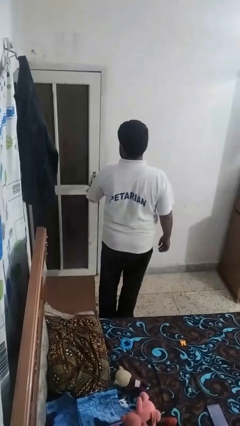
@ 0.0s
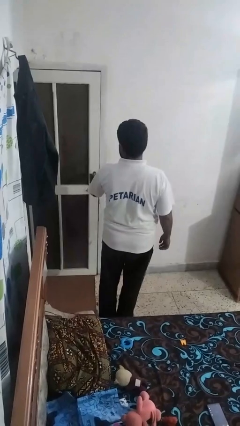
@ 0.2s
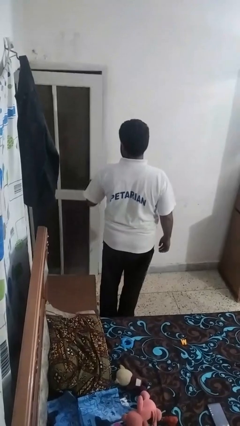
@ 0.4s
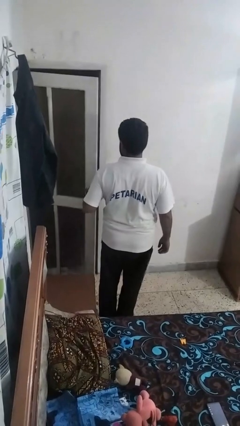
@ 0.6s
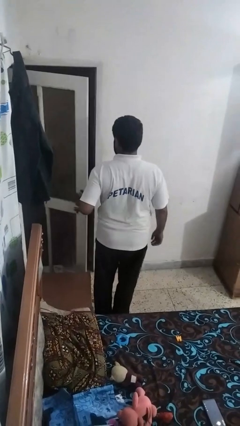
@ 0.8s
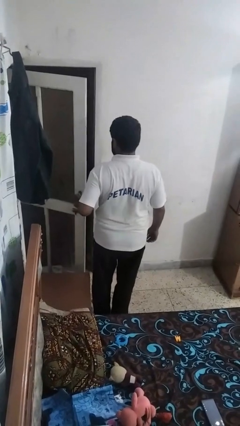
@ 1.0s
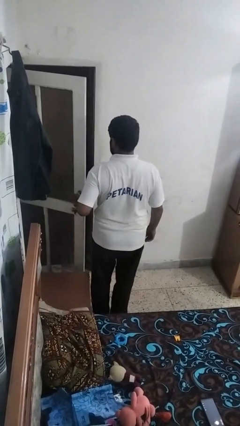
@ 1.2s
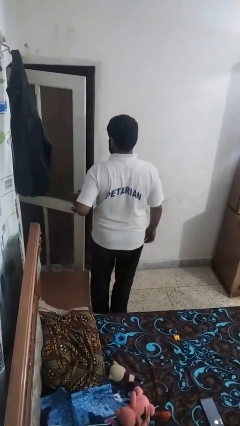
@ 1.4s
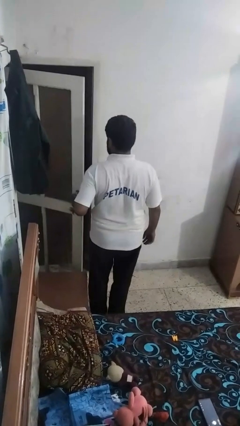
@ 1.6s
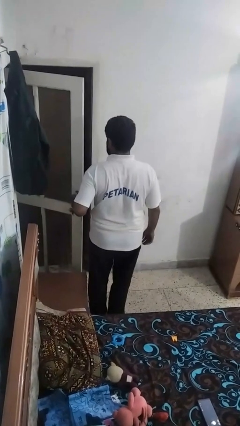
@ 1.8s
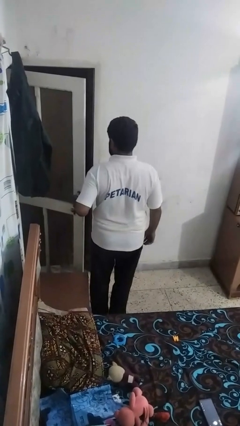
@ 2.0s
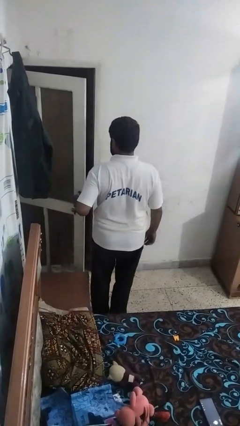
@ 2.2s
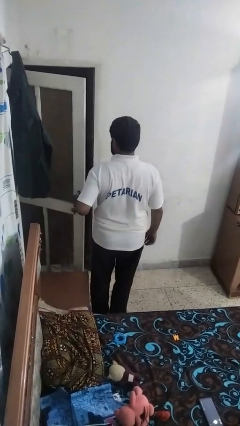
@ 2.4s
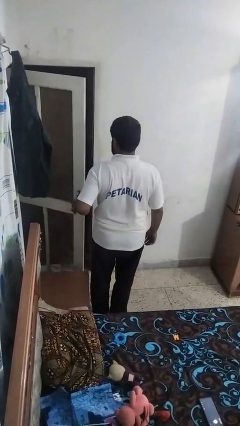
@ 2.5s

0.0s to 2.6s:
person opens facility door

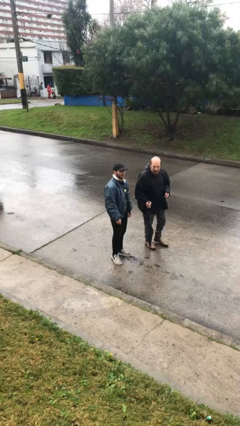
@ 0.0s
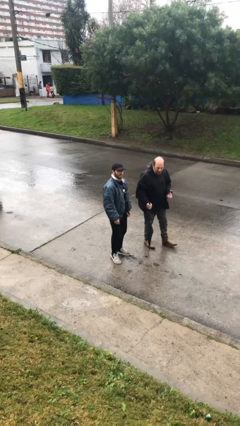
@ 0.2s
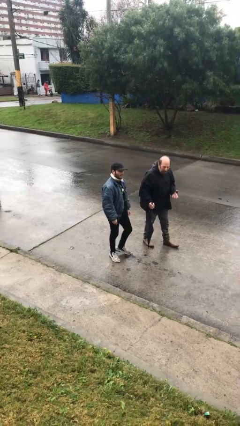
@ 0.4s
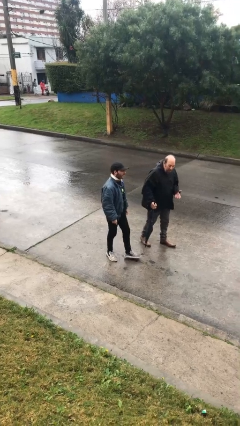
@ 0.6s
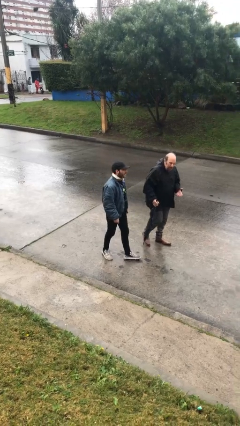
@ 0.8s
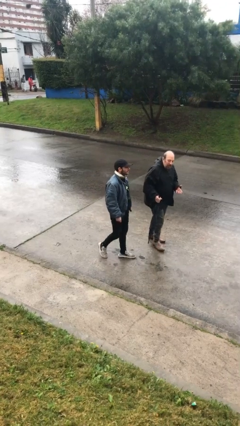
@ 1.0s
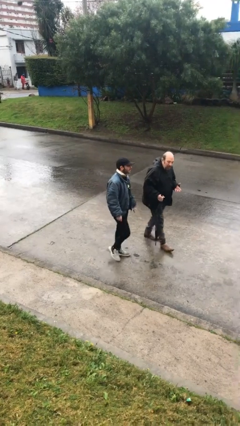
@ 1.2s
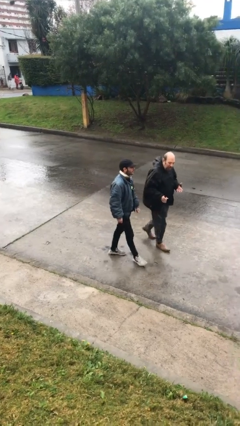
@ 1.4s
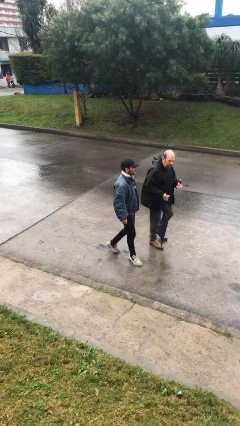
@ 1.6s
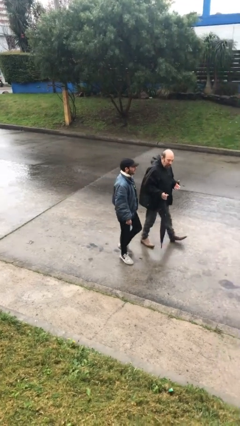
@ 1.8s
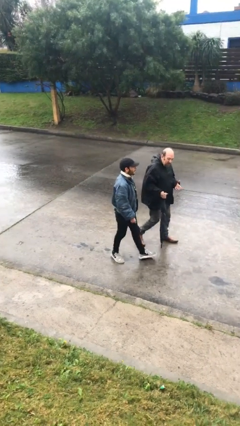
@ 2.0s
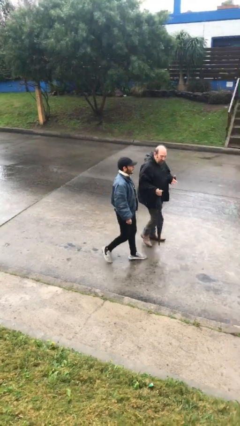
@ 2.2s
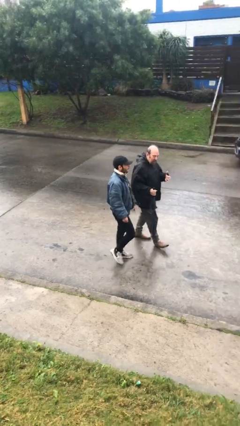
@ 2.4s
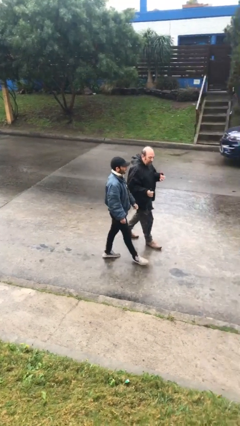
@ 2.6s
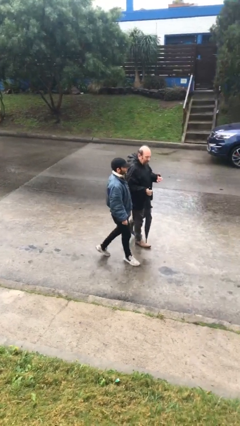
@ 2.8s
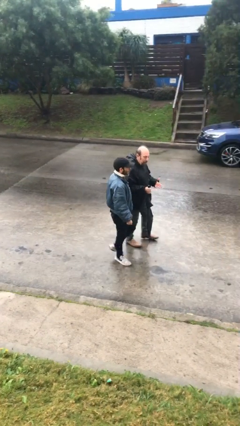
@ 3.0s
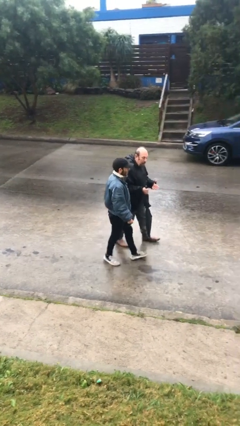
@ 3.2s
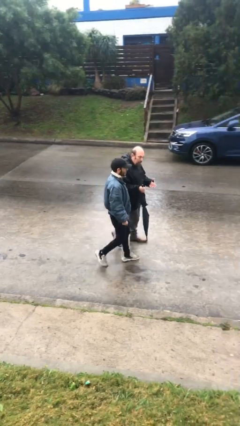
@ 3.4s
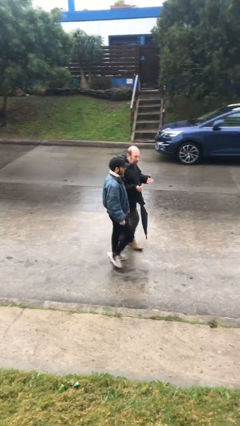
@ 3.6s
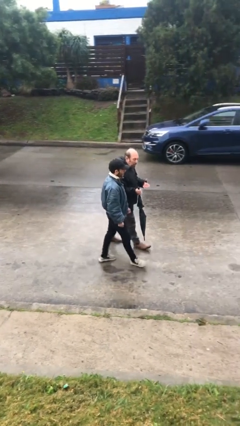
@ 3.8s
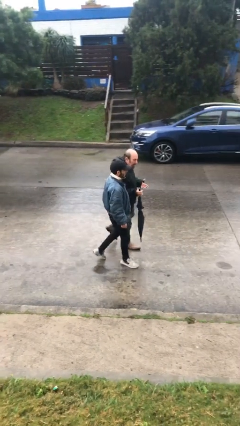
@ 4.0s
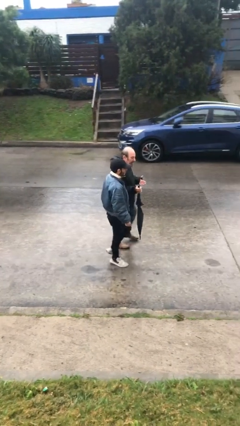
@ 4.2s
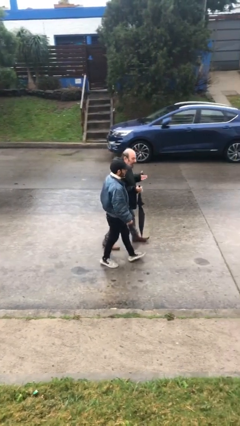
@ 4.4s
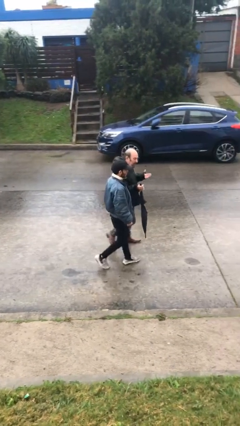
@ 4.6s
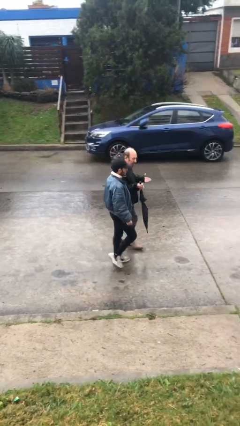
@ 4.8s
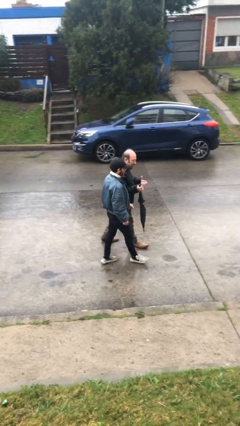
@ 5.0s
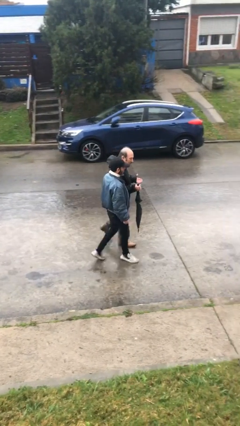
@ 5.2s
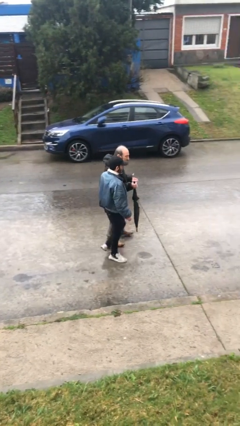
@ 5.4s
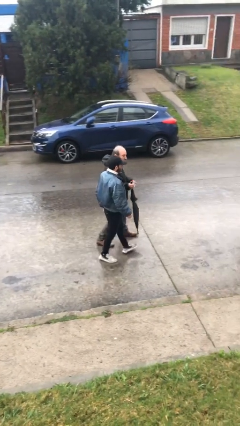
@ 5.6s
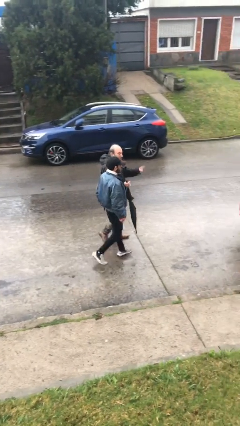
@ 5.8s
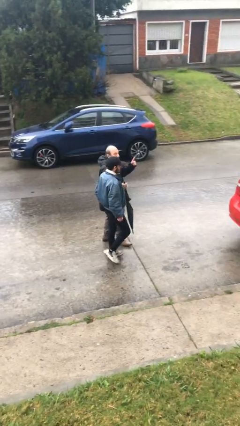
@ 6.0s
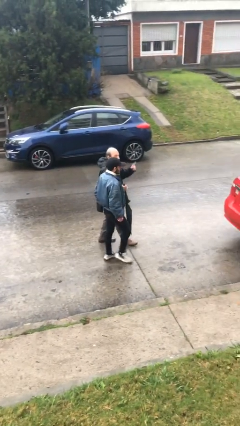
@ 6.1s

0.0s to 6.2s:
person talks to person

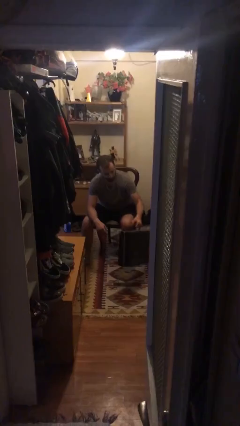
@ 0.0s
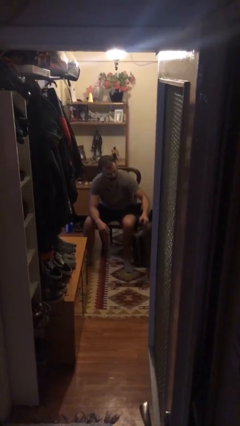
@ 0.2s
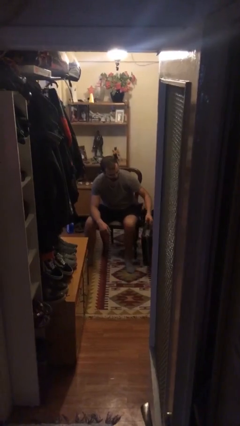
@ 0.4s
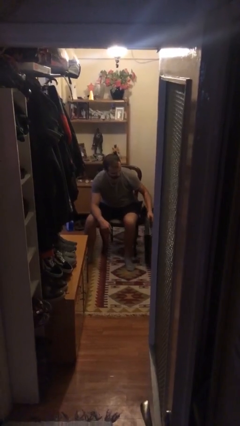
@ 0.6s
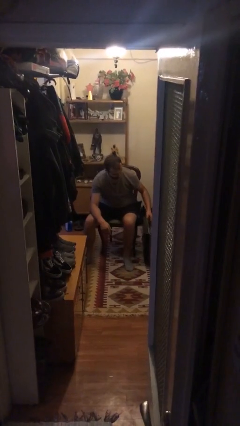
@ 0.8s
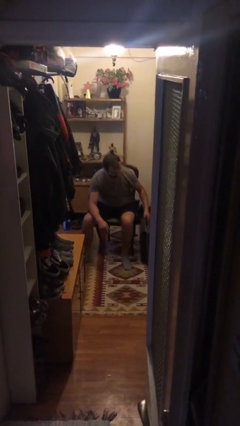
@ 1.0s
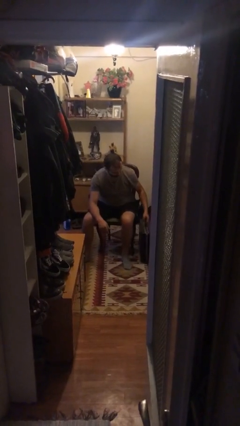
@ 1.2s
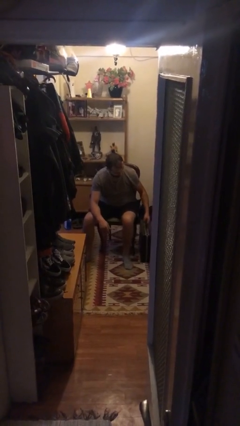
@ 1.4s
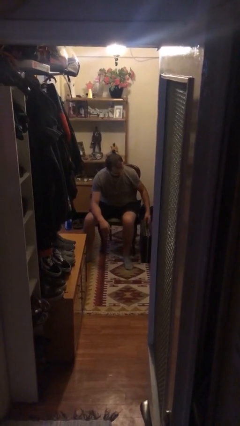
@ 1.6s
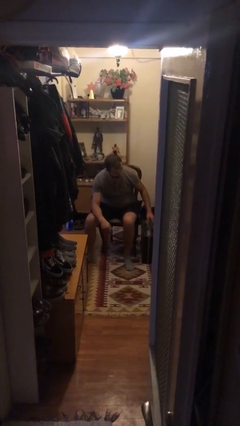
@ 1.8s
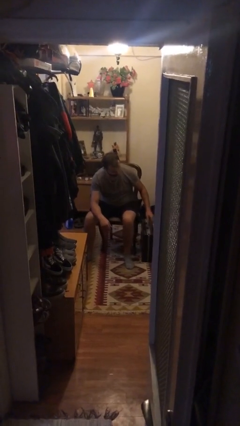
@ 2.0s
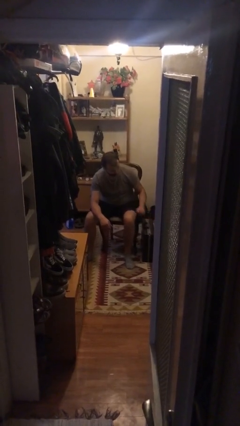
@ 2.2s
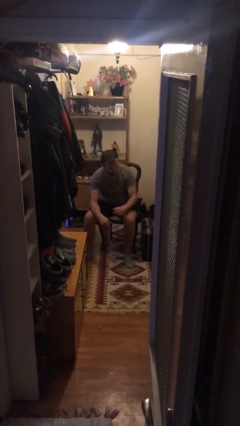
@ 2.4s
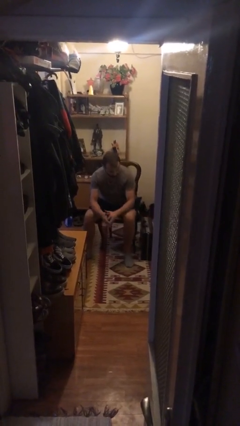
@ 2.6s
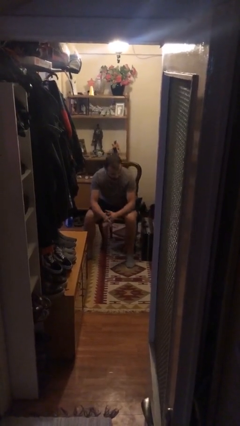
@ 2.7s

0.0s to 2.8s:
person puts down object on floor

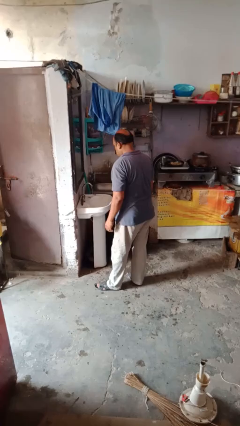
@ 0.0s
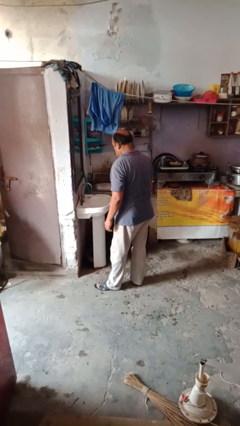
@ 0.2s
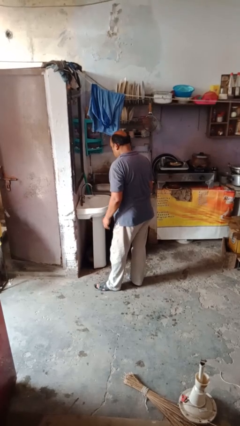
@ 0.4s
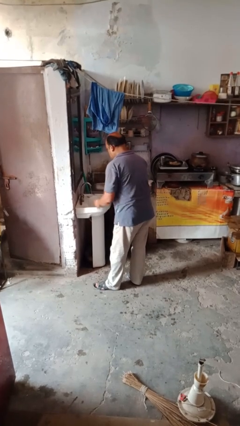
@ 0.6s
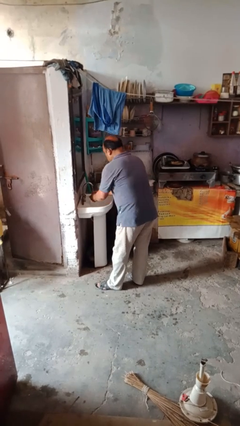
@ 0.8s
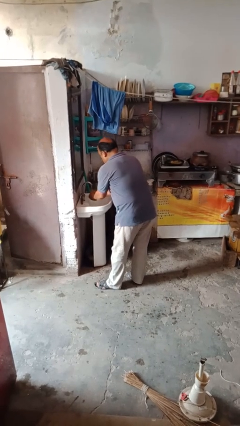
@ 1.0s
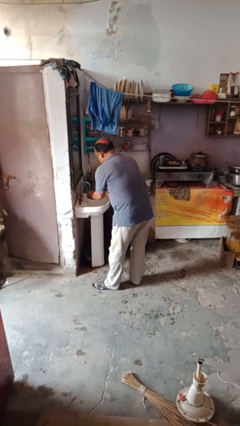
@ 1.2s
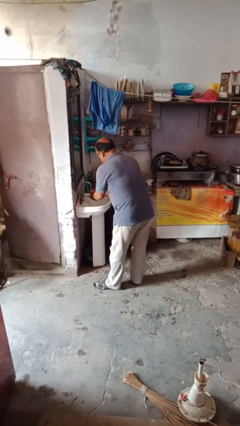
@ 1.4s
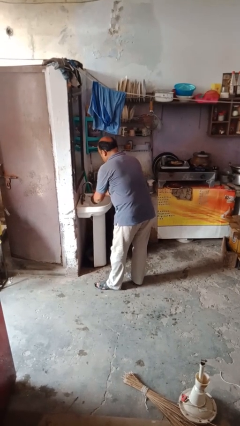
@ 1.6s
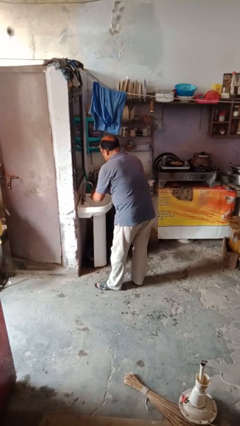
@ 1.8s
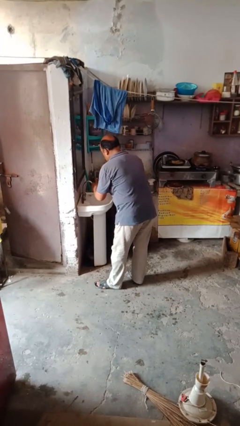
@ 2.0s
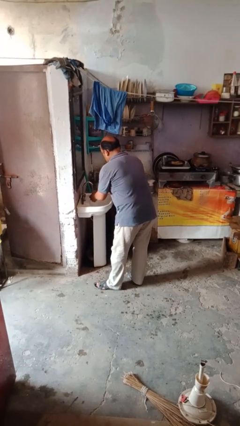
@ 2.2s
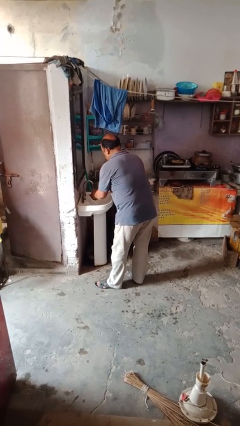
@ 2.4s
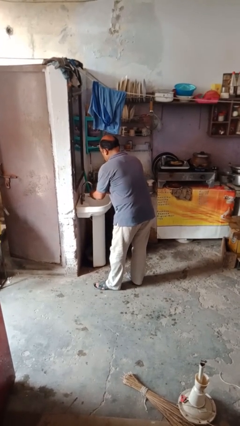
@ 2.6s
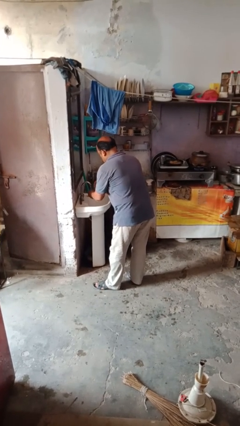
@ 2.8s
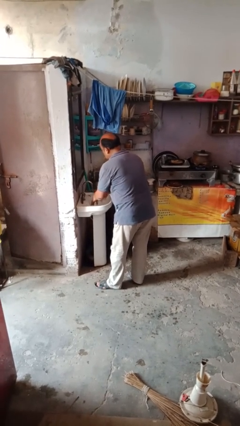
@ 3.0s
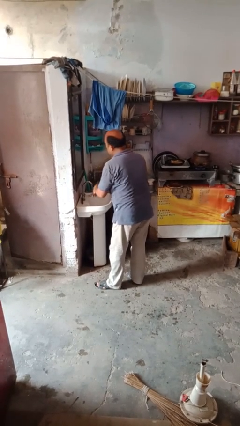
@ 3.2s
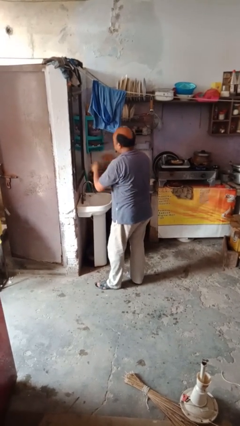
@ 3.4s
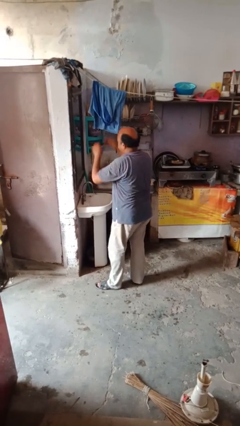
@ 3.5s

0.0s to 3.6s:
person washes hands

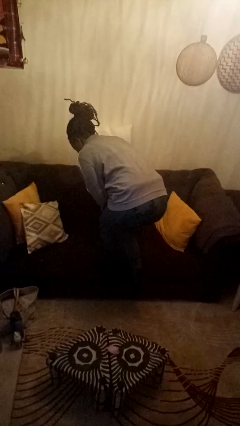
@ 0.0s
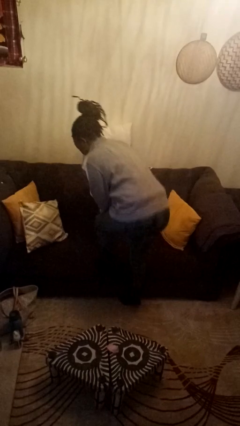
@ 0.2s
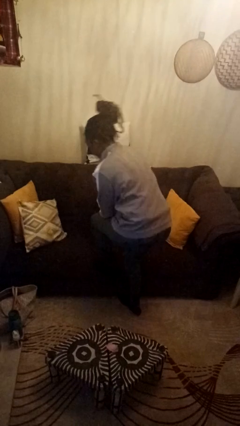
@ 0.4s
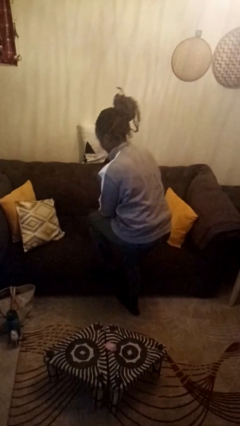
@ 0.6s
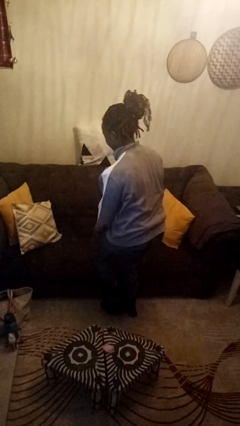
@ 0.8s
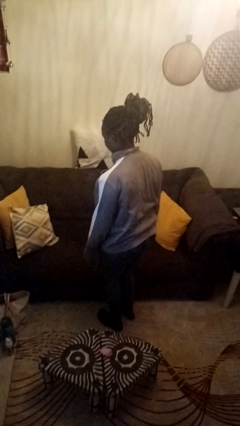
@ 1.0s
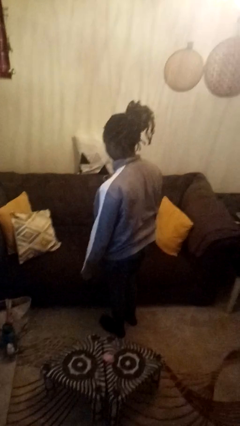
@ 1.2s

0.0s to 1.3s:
person climbs off couch

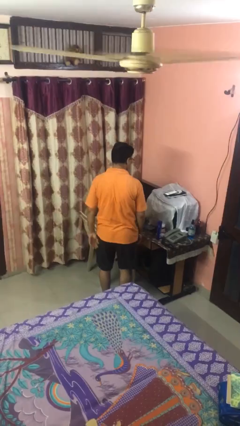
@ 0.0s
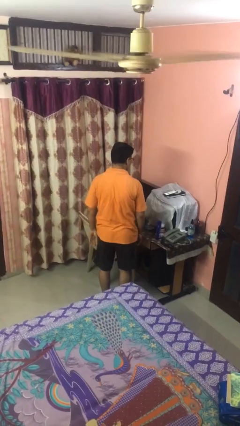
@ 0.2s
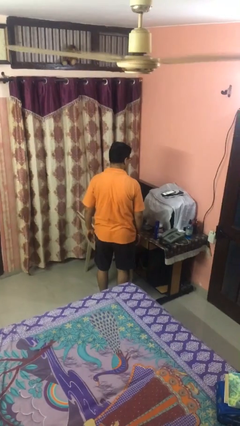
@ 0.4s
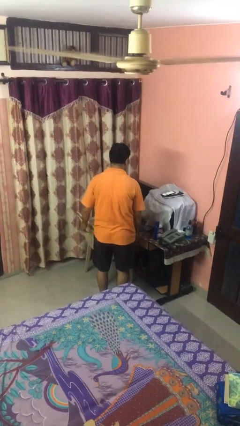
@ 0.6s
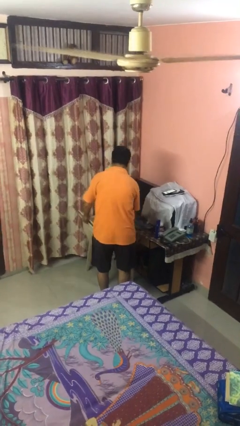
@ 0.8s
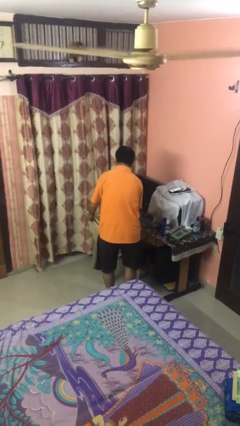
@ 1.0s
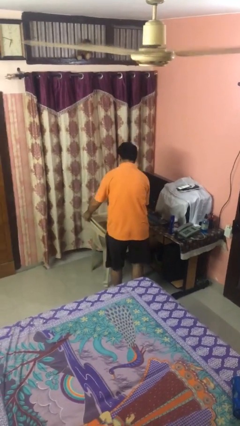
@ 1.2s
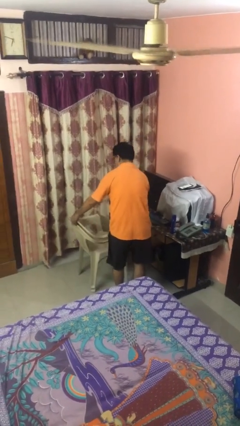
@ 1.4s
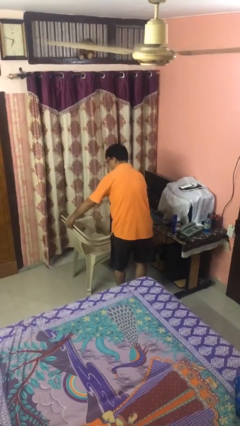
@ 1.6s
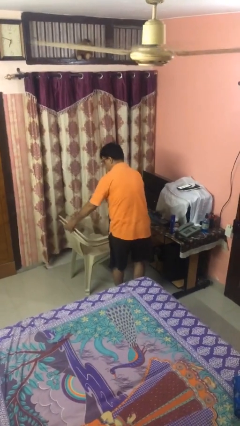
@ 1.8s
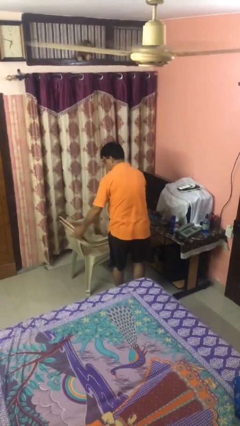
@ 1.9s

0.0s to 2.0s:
person pulls out chair
